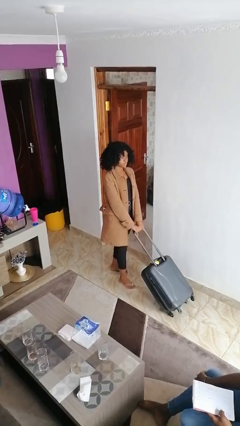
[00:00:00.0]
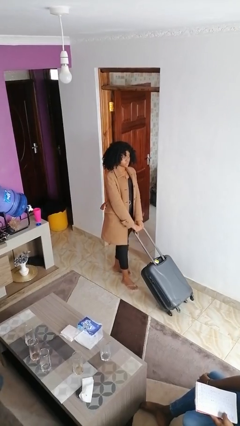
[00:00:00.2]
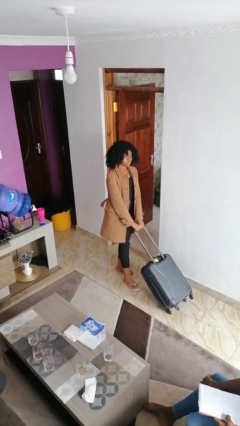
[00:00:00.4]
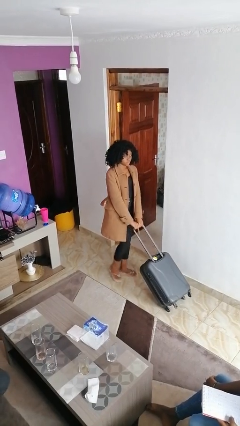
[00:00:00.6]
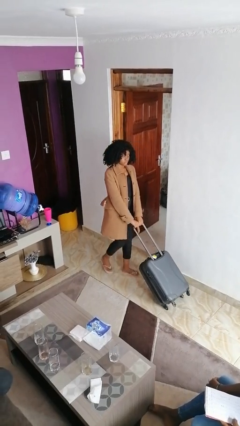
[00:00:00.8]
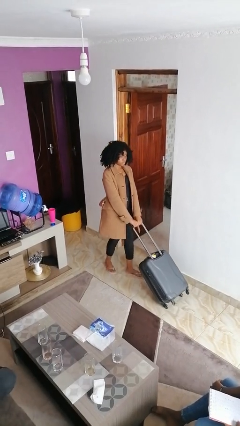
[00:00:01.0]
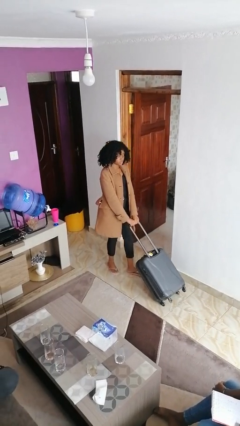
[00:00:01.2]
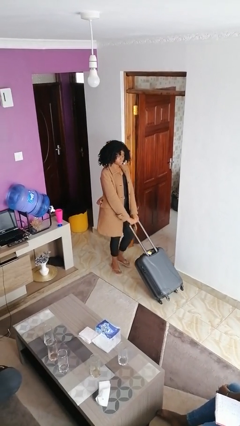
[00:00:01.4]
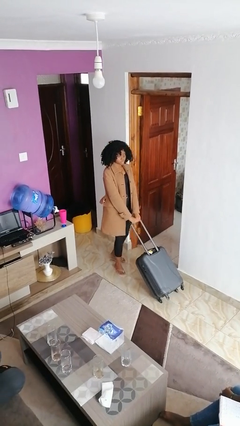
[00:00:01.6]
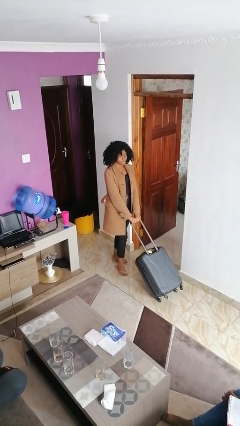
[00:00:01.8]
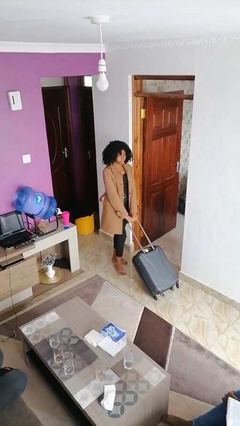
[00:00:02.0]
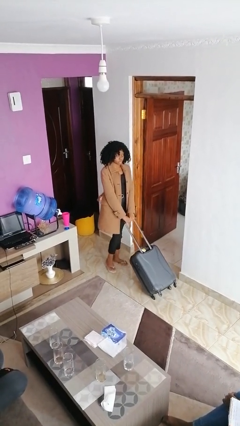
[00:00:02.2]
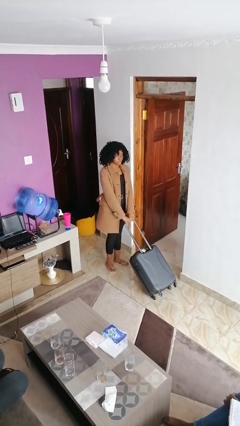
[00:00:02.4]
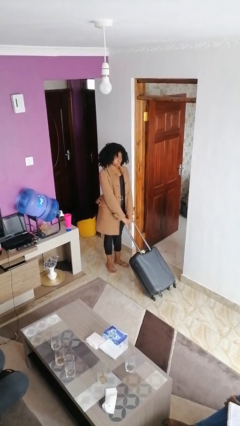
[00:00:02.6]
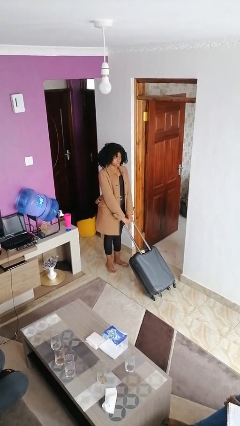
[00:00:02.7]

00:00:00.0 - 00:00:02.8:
person pulls wheeled cart

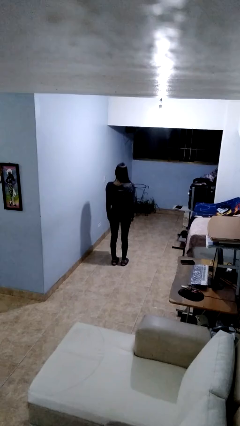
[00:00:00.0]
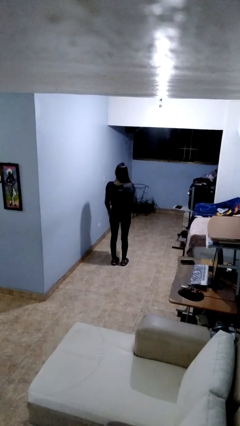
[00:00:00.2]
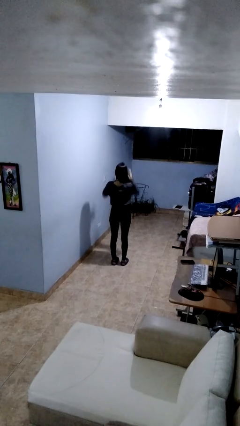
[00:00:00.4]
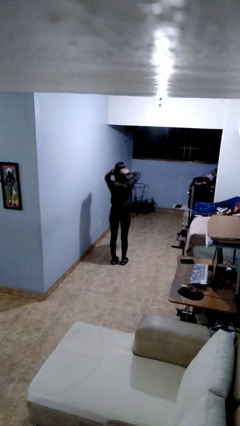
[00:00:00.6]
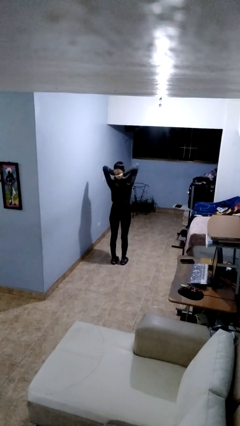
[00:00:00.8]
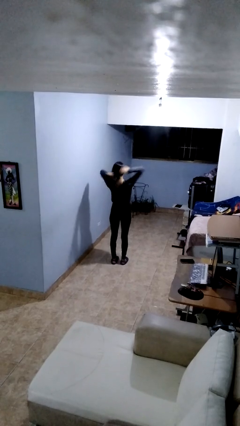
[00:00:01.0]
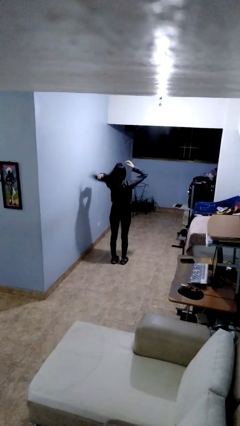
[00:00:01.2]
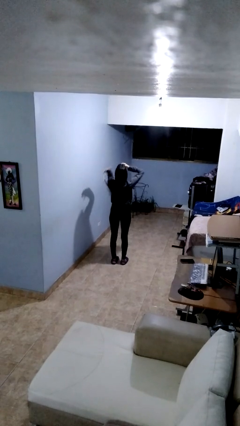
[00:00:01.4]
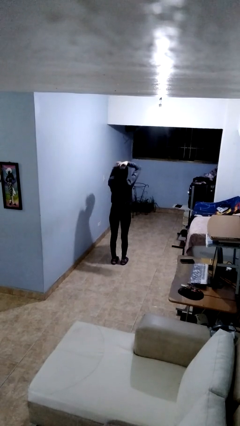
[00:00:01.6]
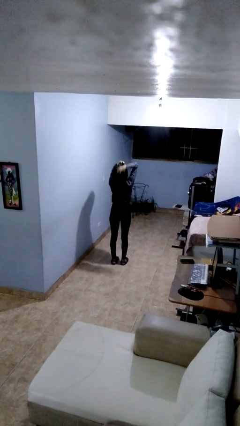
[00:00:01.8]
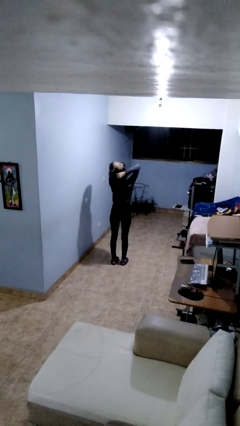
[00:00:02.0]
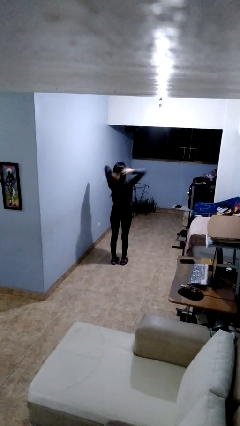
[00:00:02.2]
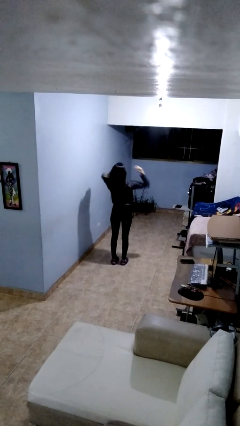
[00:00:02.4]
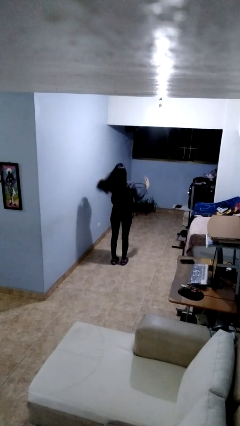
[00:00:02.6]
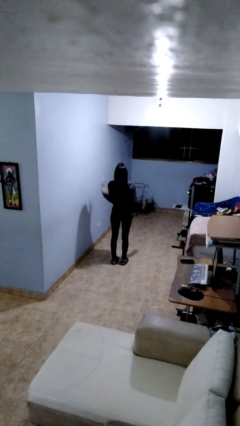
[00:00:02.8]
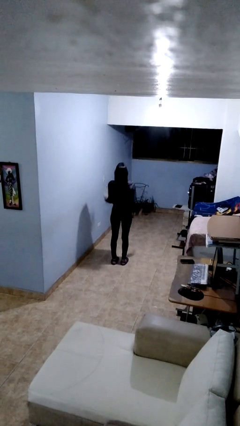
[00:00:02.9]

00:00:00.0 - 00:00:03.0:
person strokes hair

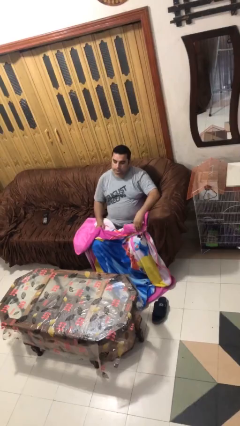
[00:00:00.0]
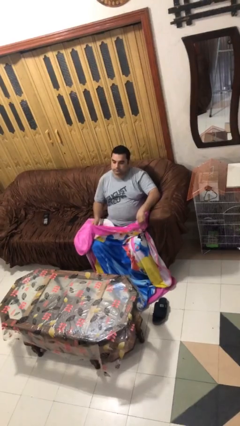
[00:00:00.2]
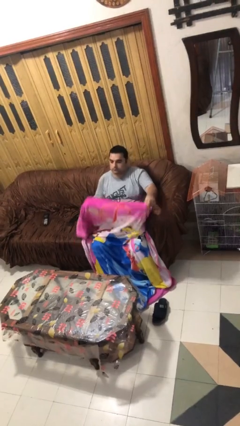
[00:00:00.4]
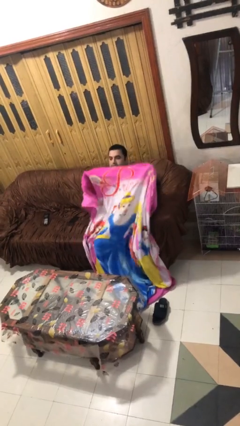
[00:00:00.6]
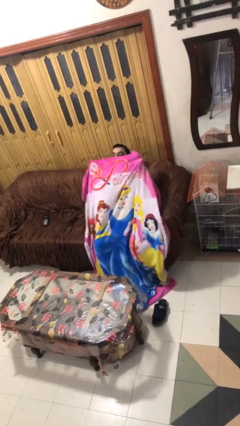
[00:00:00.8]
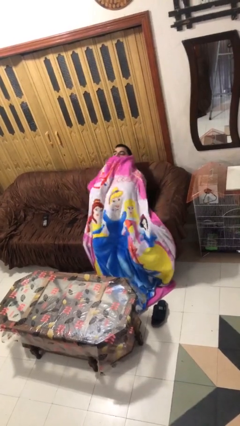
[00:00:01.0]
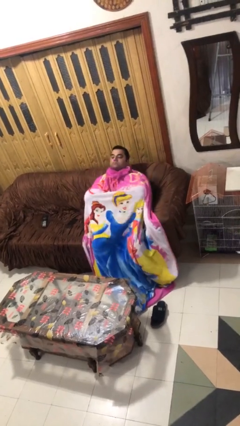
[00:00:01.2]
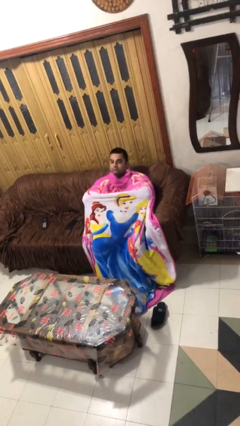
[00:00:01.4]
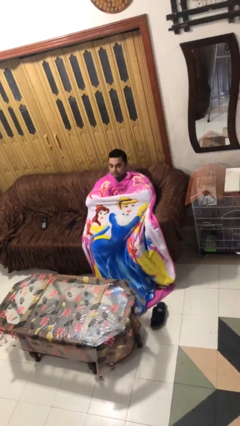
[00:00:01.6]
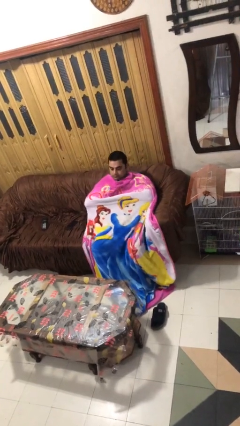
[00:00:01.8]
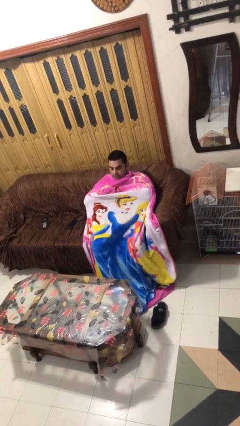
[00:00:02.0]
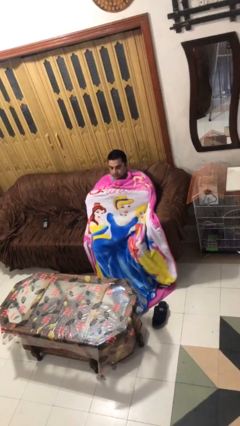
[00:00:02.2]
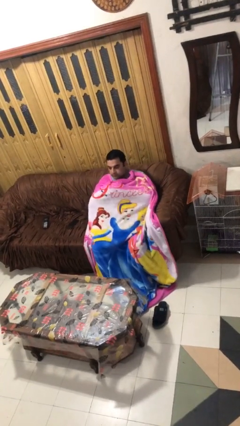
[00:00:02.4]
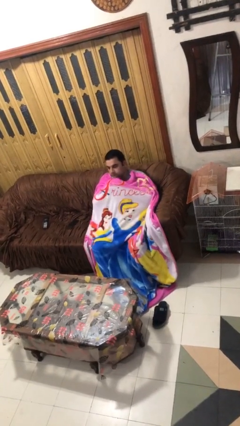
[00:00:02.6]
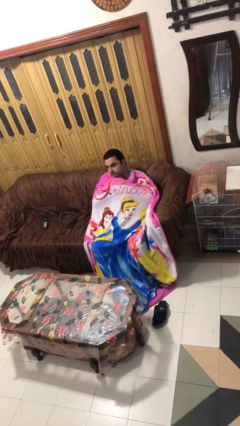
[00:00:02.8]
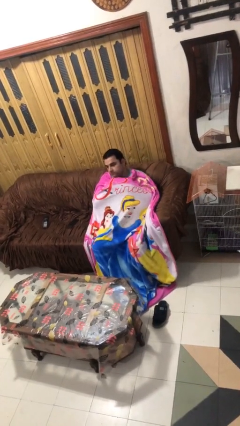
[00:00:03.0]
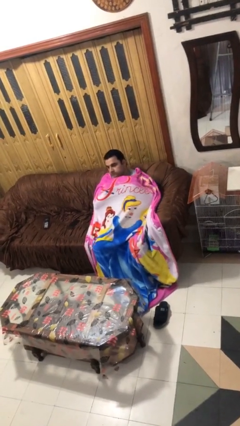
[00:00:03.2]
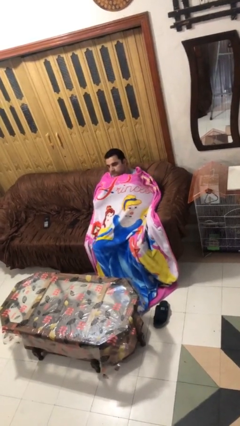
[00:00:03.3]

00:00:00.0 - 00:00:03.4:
person covers with blanket

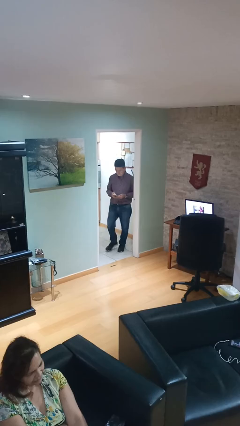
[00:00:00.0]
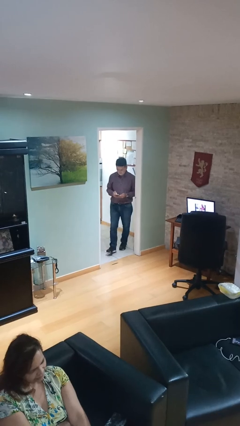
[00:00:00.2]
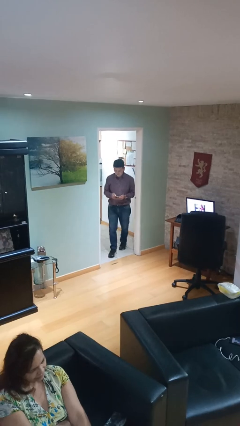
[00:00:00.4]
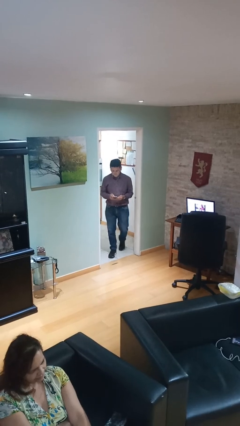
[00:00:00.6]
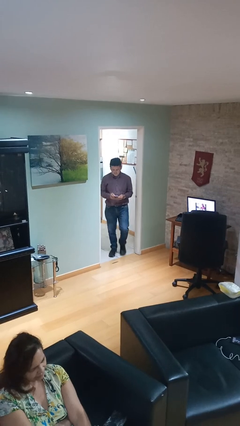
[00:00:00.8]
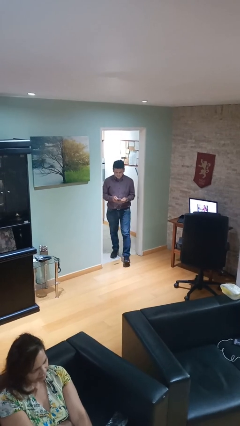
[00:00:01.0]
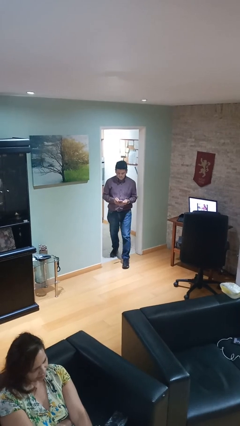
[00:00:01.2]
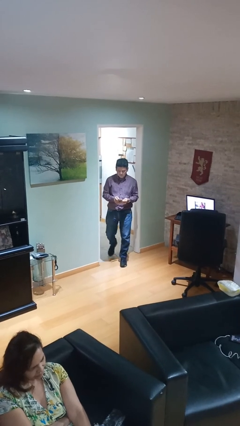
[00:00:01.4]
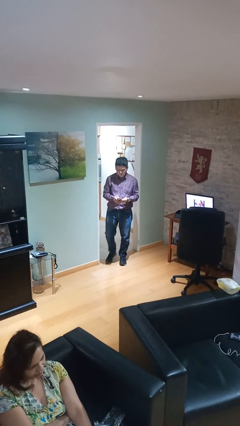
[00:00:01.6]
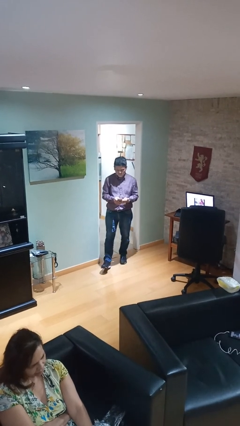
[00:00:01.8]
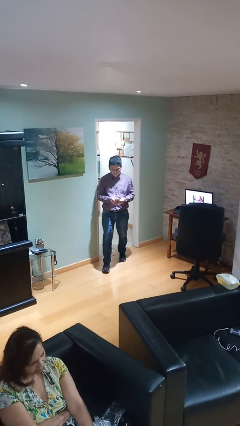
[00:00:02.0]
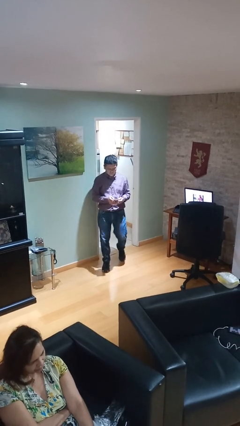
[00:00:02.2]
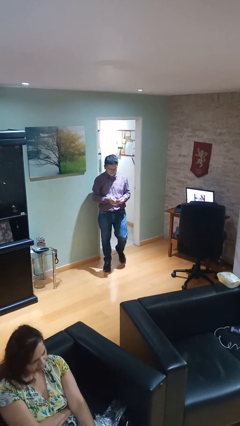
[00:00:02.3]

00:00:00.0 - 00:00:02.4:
person enters scene through structure

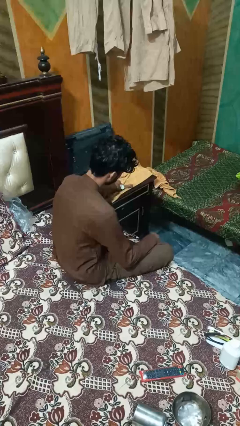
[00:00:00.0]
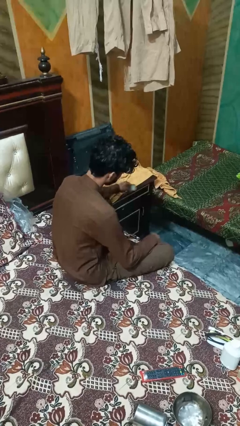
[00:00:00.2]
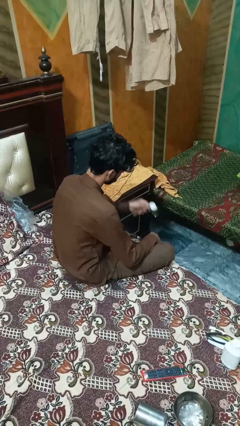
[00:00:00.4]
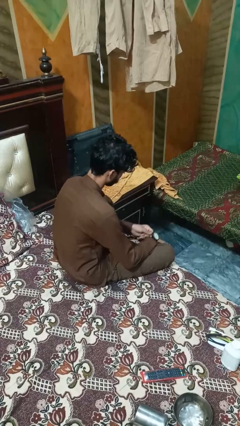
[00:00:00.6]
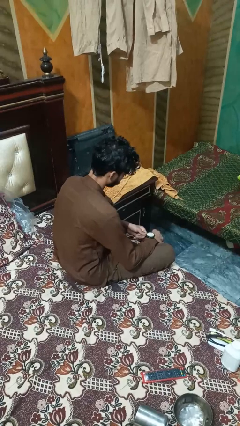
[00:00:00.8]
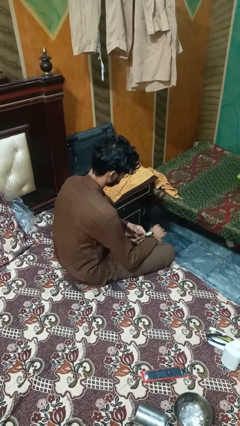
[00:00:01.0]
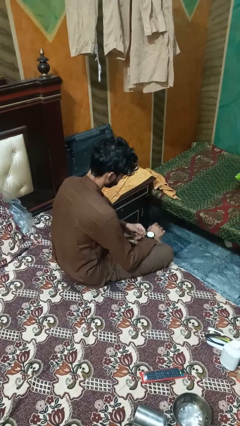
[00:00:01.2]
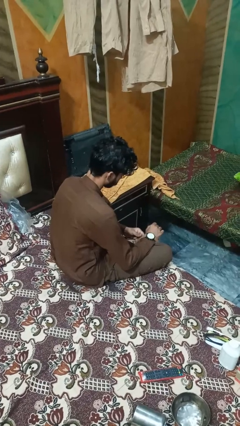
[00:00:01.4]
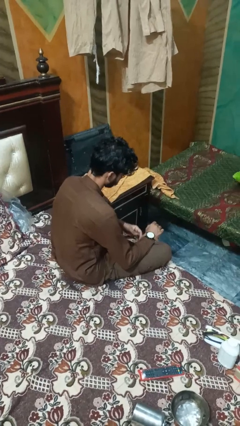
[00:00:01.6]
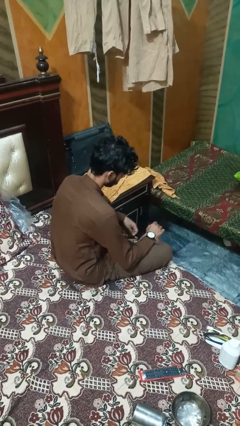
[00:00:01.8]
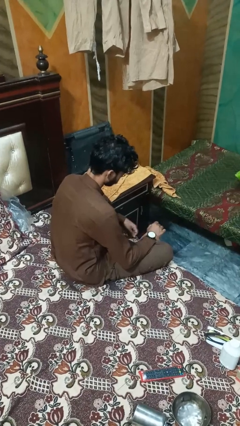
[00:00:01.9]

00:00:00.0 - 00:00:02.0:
person puts on wristwatch

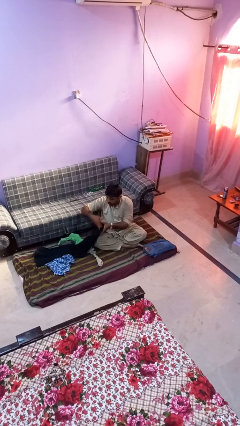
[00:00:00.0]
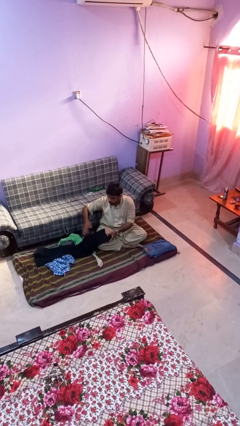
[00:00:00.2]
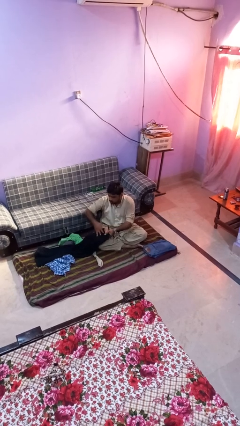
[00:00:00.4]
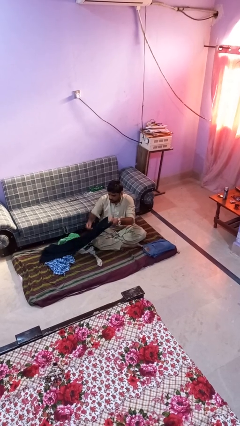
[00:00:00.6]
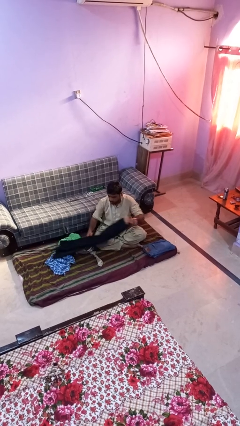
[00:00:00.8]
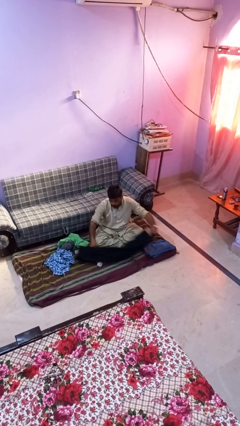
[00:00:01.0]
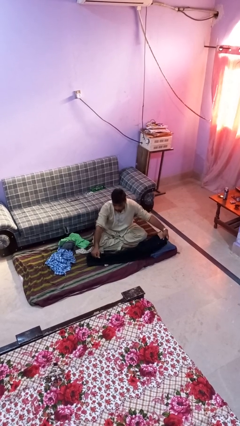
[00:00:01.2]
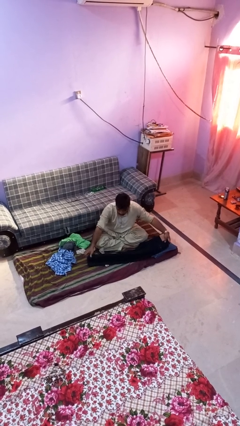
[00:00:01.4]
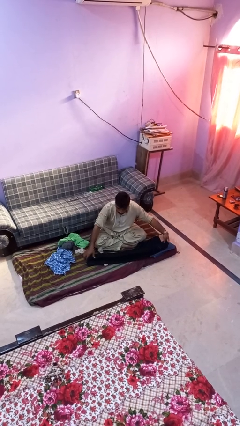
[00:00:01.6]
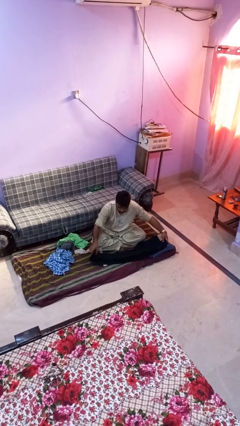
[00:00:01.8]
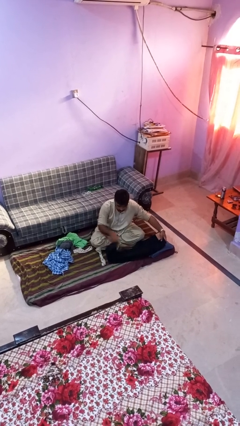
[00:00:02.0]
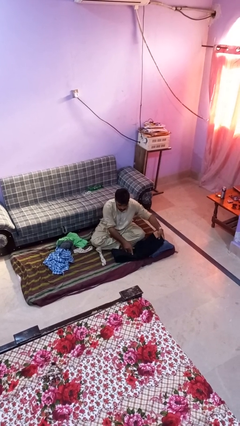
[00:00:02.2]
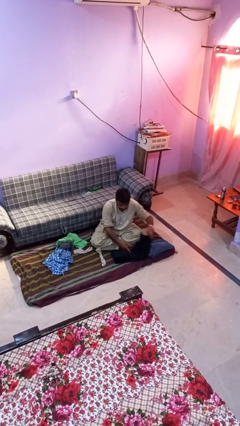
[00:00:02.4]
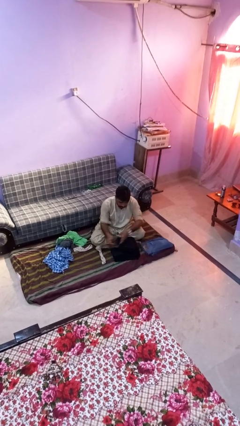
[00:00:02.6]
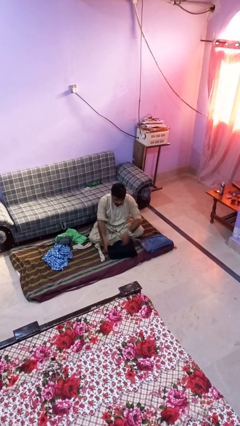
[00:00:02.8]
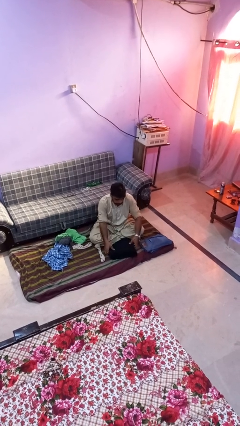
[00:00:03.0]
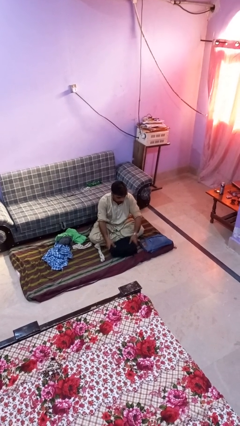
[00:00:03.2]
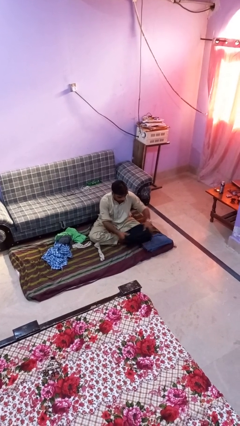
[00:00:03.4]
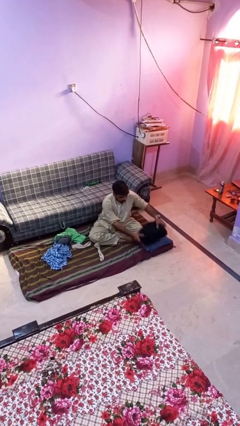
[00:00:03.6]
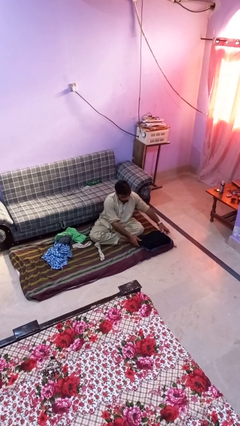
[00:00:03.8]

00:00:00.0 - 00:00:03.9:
person folds pants

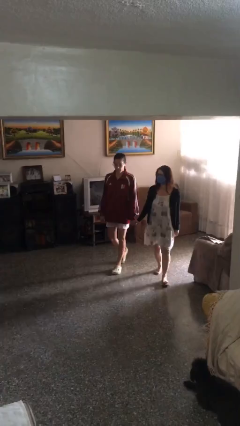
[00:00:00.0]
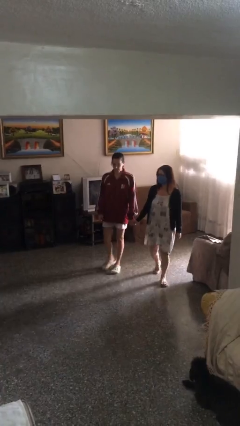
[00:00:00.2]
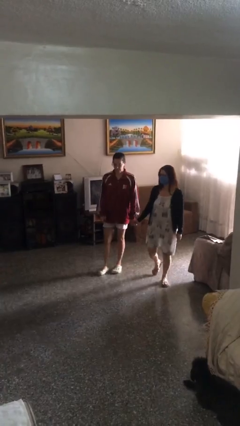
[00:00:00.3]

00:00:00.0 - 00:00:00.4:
person holds hand
